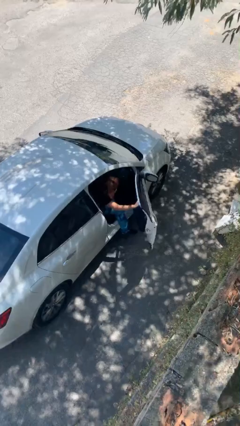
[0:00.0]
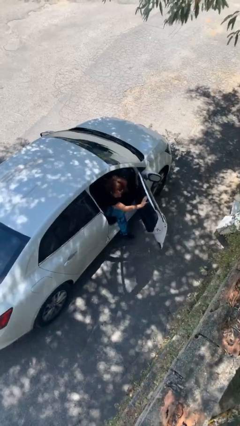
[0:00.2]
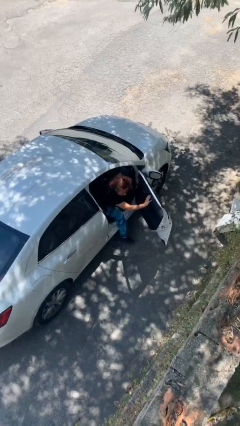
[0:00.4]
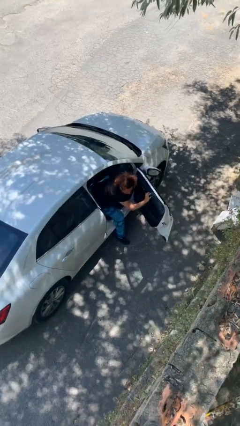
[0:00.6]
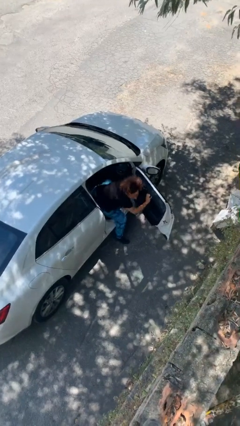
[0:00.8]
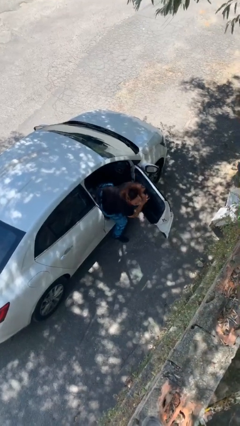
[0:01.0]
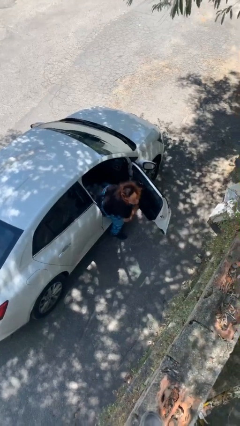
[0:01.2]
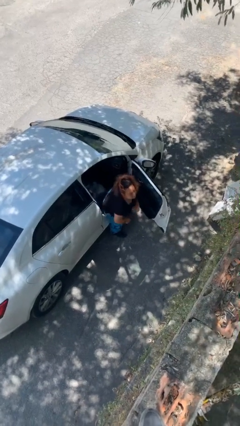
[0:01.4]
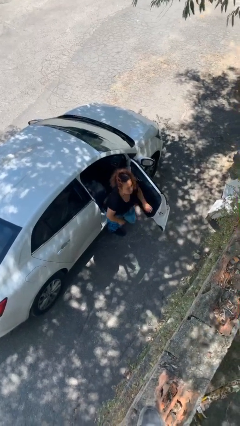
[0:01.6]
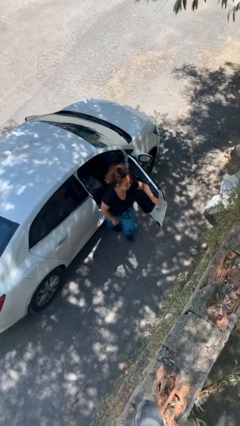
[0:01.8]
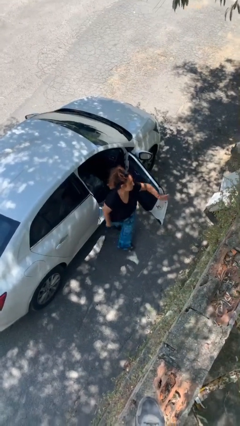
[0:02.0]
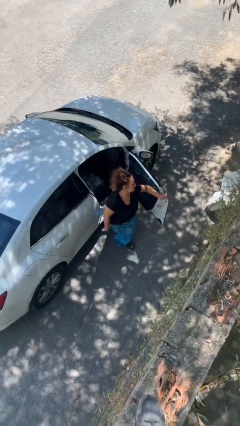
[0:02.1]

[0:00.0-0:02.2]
person exits car

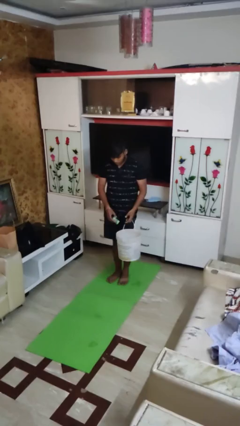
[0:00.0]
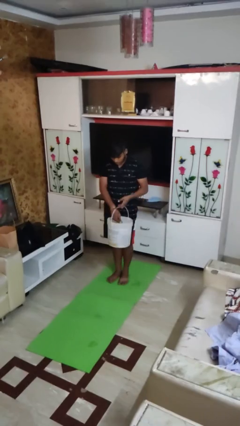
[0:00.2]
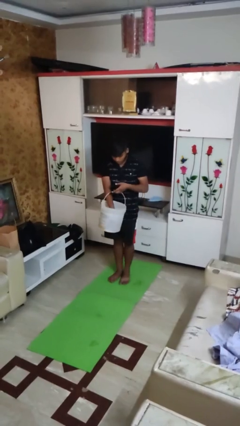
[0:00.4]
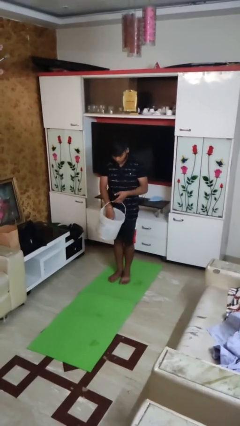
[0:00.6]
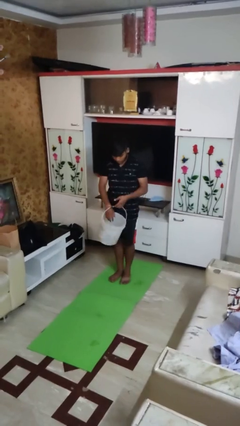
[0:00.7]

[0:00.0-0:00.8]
person puts object into basket

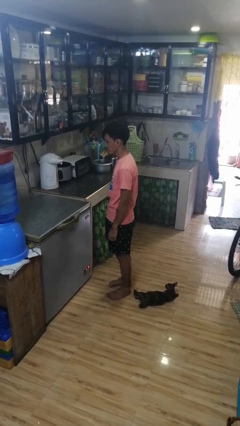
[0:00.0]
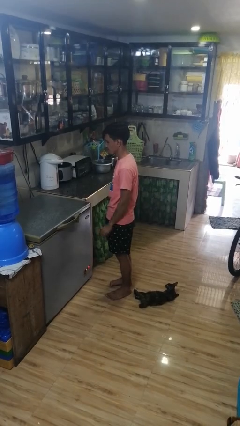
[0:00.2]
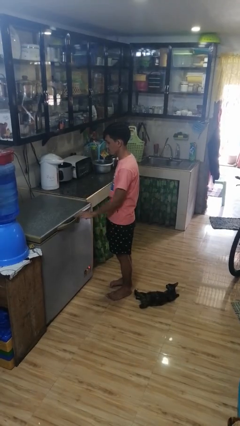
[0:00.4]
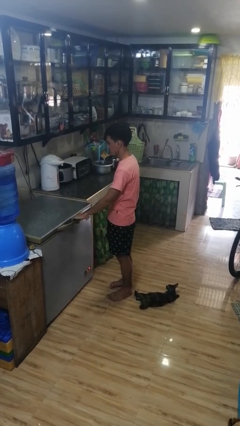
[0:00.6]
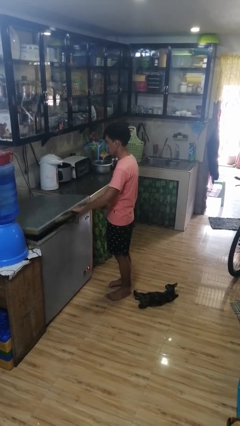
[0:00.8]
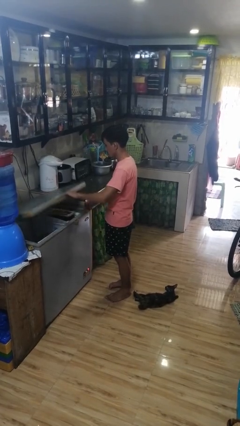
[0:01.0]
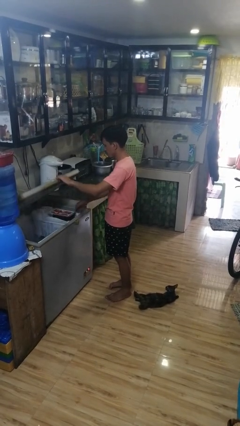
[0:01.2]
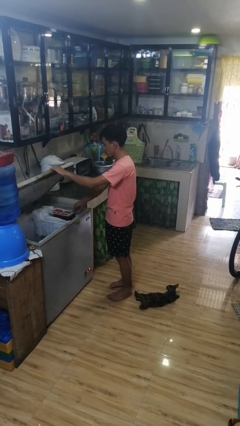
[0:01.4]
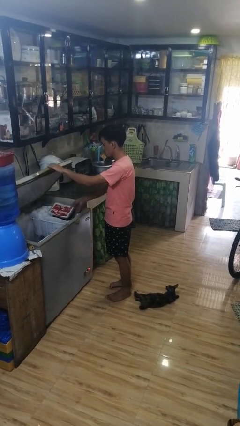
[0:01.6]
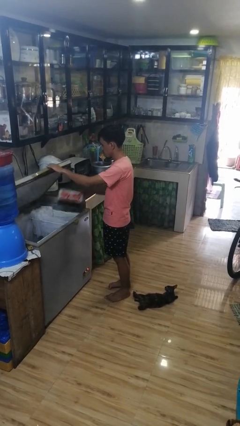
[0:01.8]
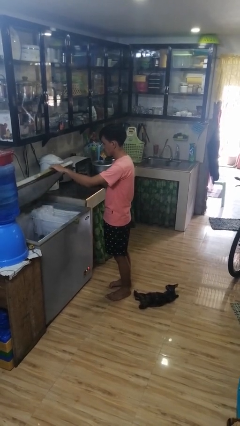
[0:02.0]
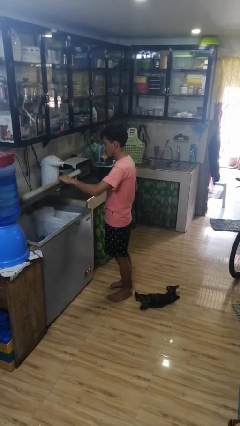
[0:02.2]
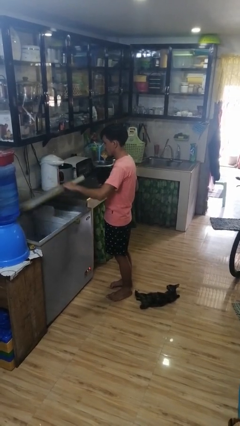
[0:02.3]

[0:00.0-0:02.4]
person takes object from refrigerator

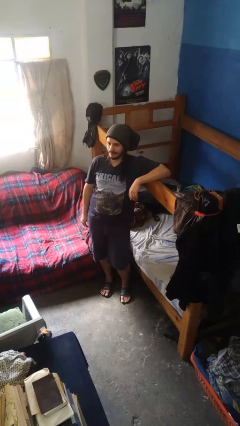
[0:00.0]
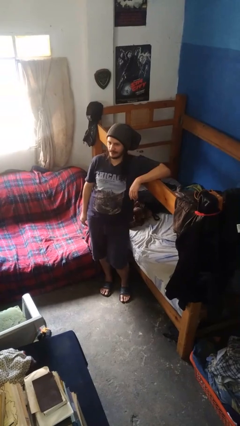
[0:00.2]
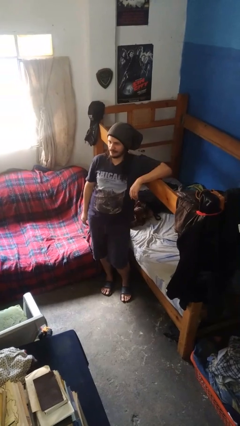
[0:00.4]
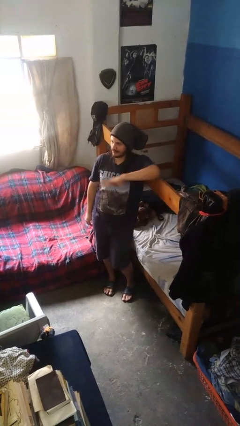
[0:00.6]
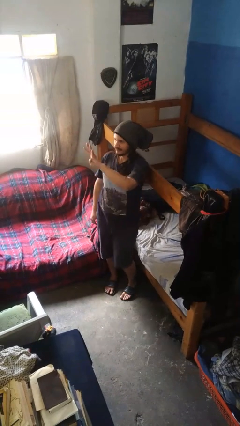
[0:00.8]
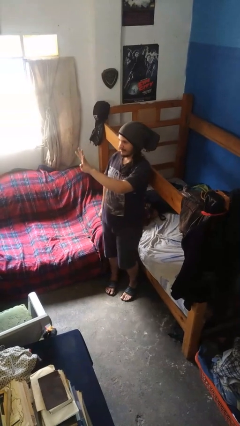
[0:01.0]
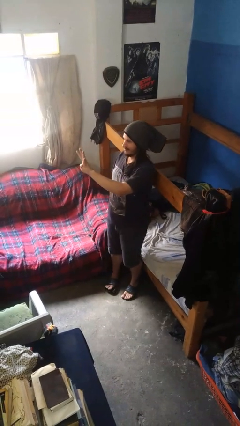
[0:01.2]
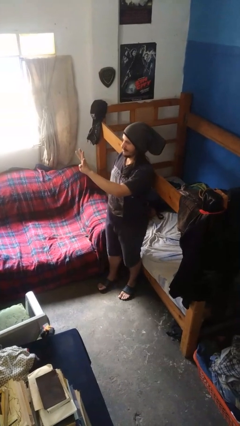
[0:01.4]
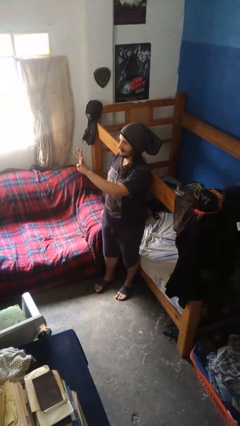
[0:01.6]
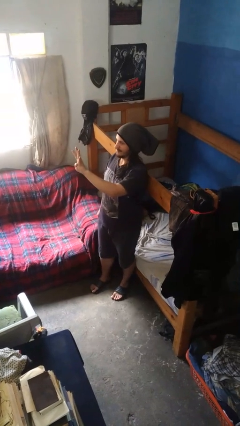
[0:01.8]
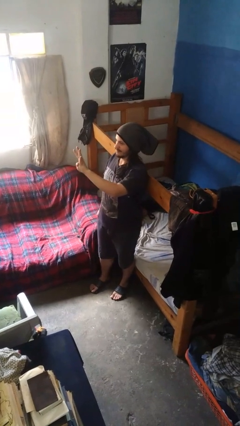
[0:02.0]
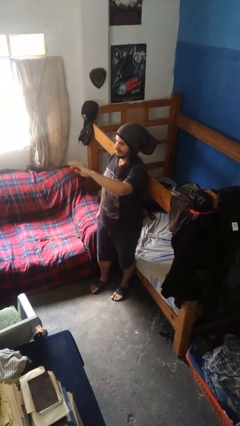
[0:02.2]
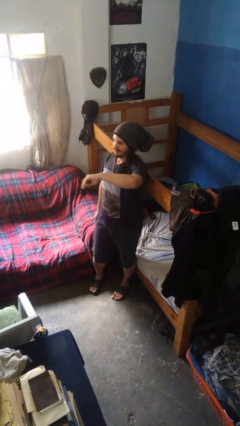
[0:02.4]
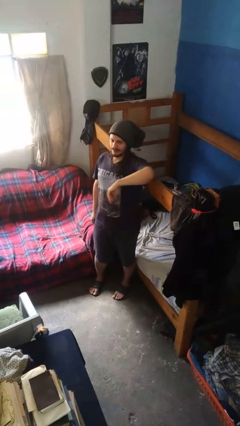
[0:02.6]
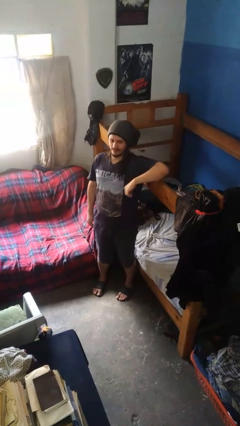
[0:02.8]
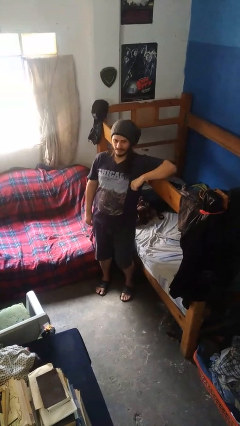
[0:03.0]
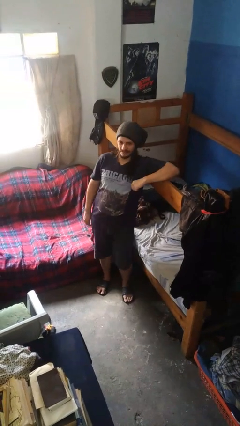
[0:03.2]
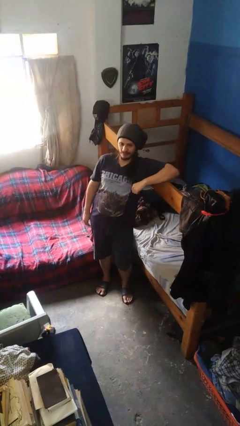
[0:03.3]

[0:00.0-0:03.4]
person gestures number four

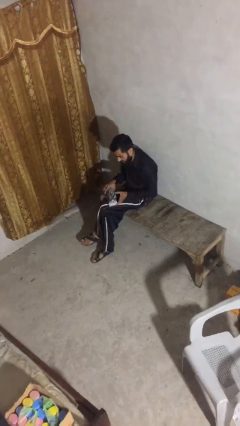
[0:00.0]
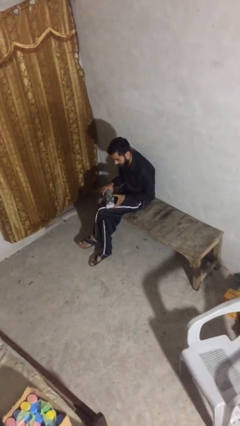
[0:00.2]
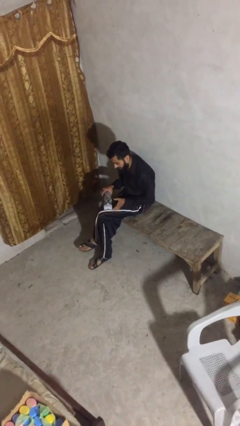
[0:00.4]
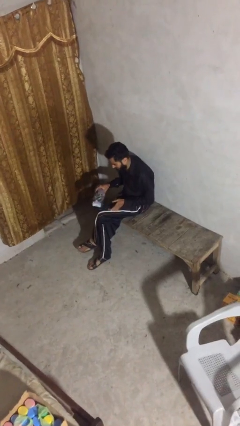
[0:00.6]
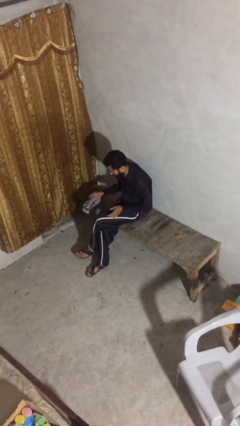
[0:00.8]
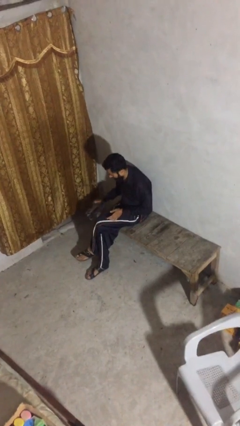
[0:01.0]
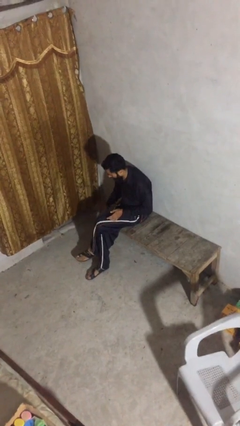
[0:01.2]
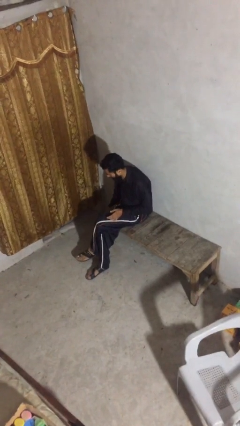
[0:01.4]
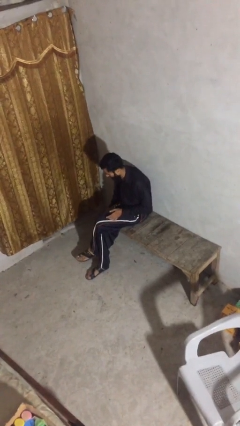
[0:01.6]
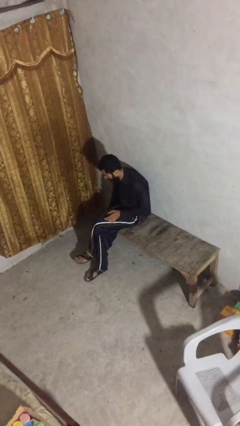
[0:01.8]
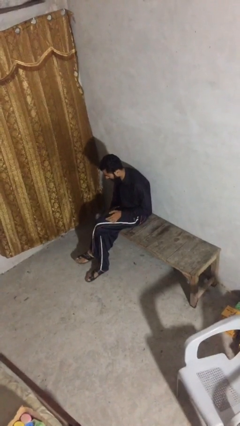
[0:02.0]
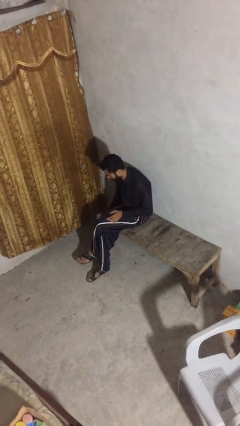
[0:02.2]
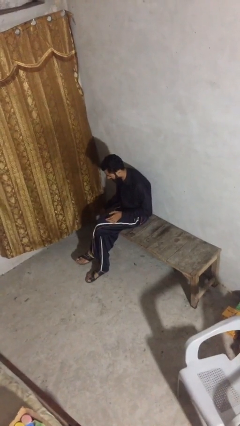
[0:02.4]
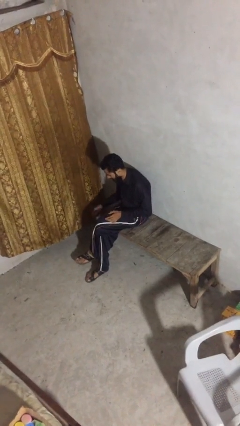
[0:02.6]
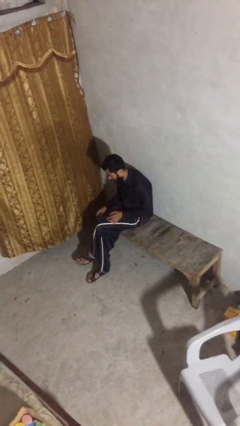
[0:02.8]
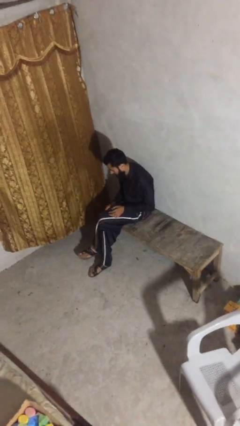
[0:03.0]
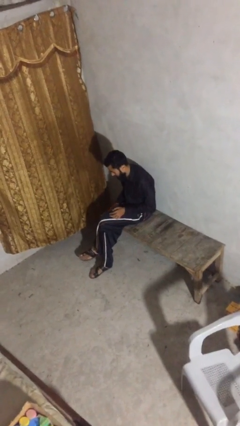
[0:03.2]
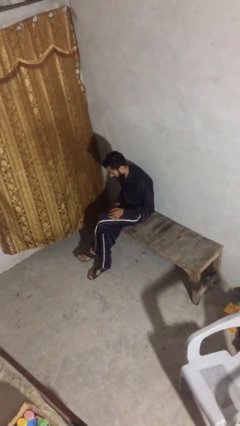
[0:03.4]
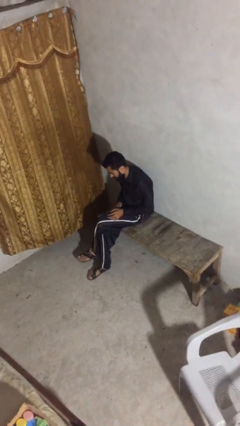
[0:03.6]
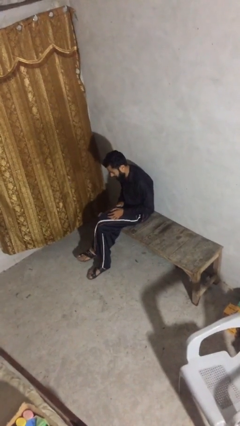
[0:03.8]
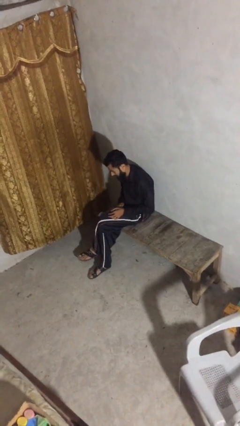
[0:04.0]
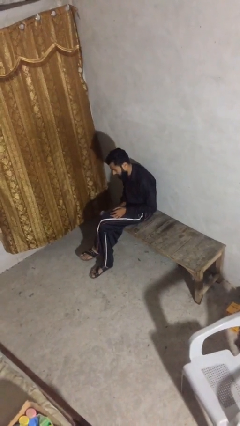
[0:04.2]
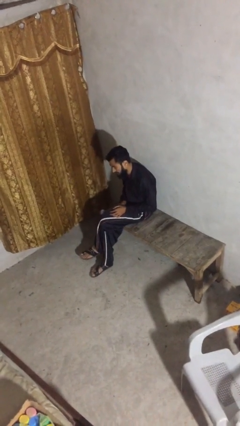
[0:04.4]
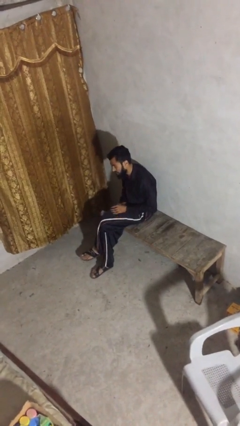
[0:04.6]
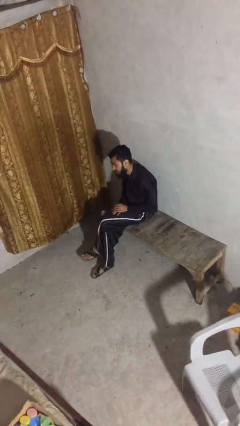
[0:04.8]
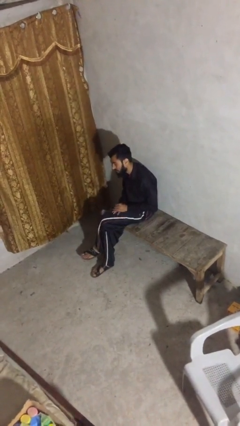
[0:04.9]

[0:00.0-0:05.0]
person puts down object on floor

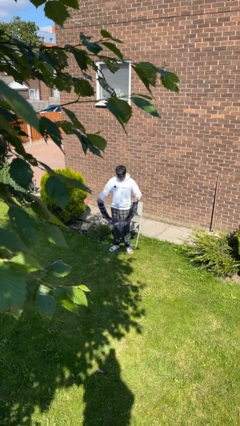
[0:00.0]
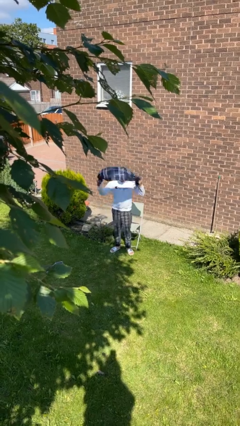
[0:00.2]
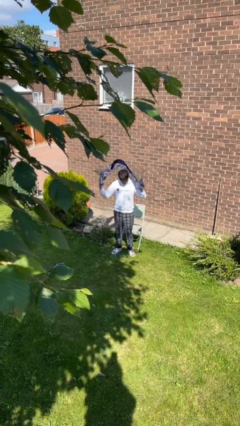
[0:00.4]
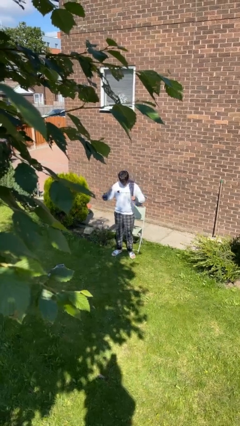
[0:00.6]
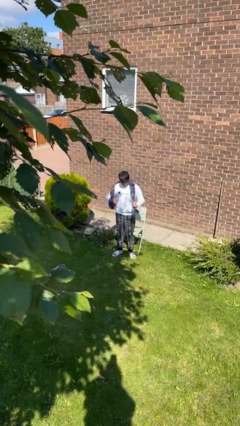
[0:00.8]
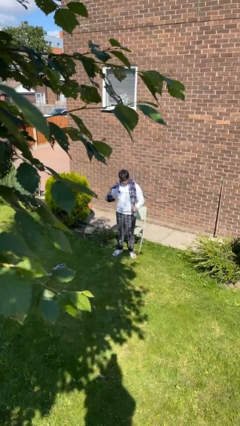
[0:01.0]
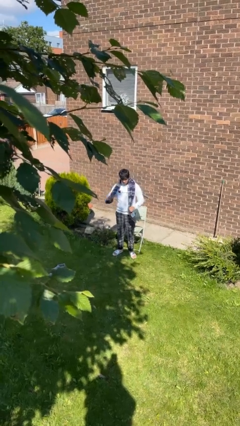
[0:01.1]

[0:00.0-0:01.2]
person puts on scarf

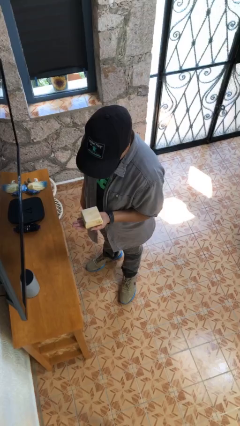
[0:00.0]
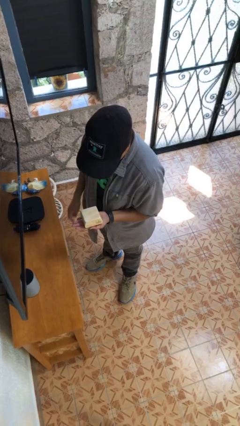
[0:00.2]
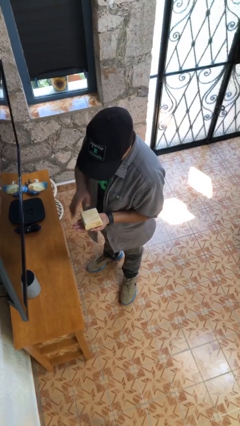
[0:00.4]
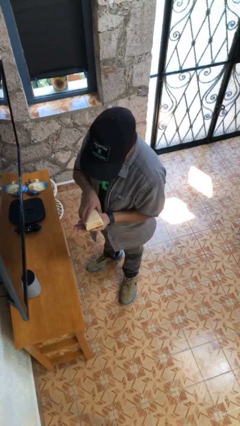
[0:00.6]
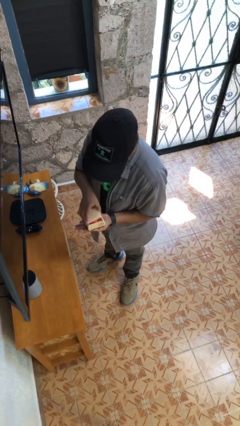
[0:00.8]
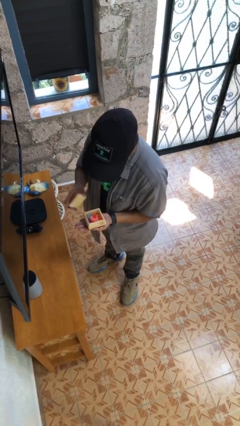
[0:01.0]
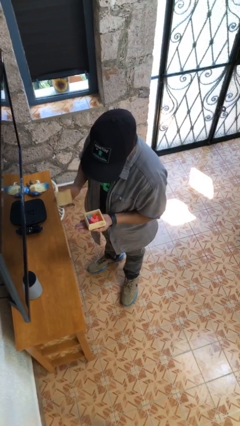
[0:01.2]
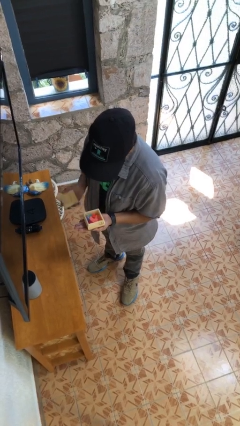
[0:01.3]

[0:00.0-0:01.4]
person opens jewelry box

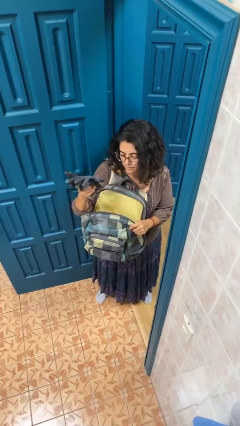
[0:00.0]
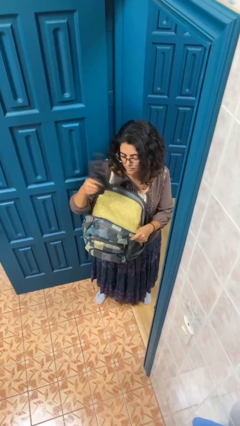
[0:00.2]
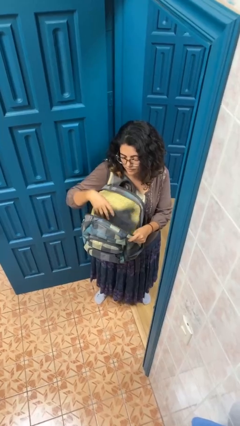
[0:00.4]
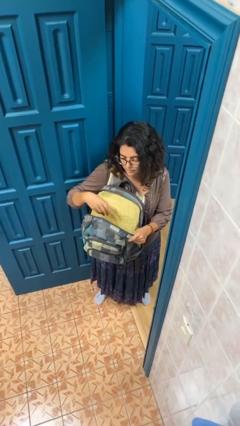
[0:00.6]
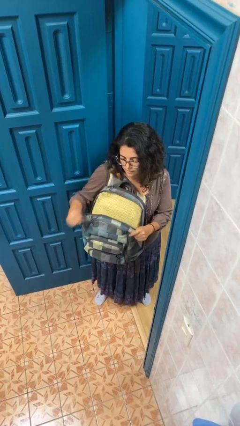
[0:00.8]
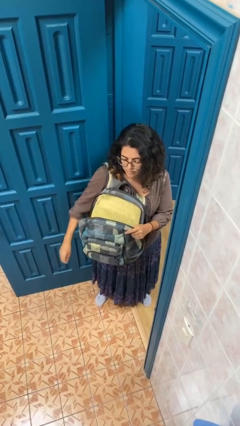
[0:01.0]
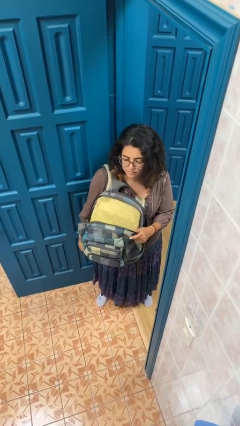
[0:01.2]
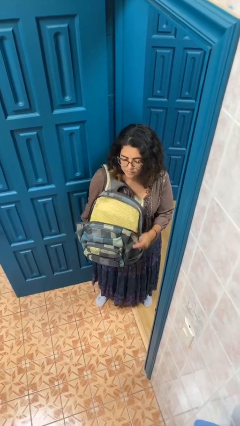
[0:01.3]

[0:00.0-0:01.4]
person puts object into backpack
